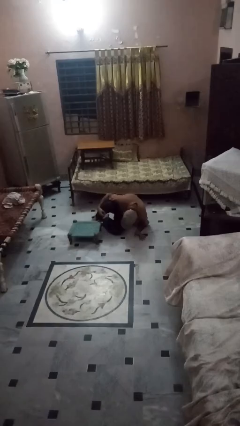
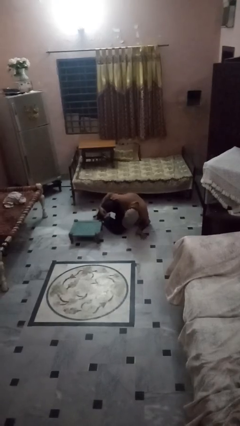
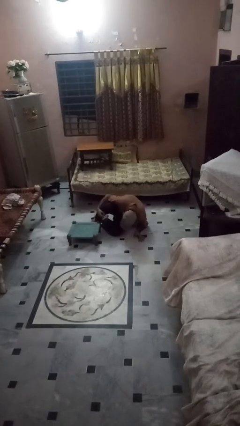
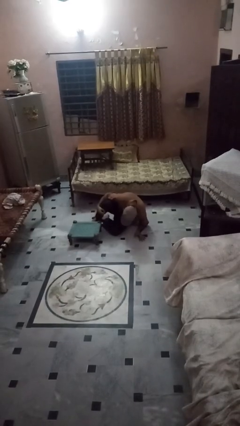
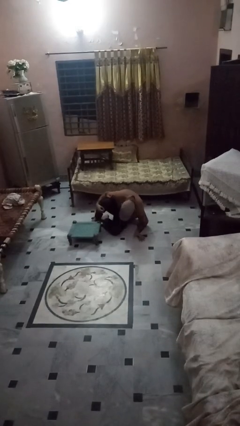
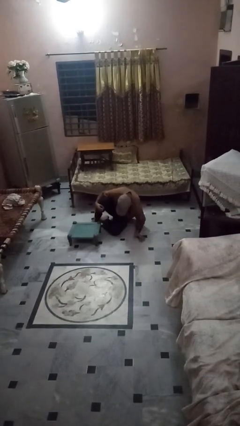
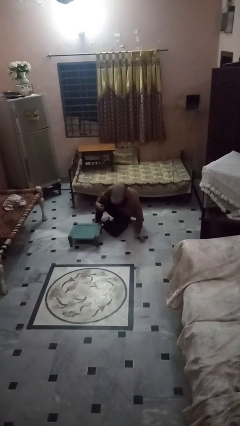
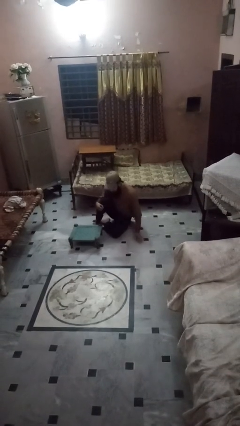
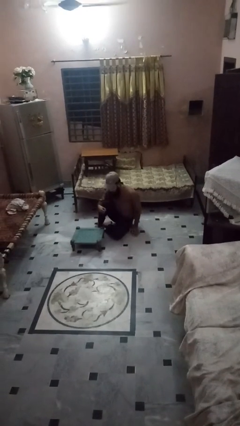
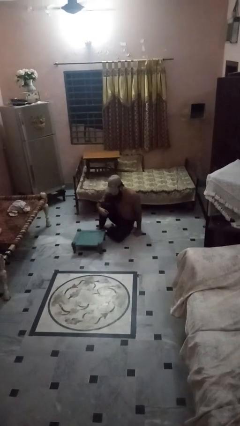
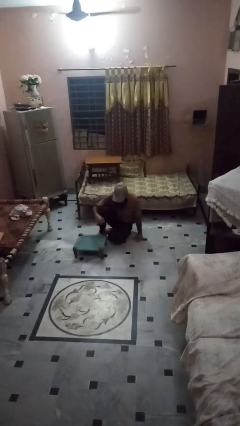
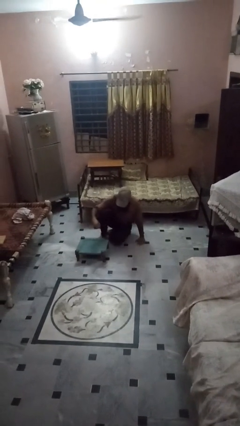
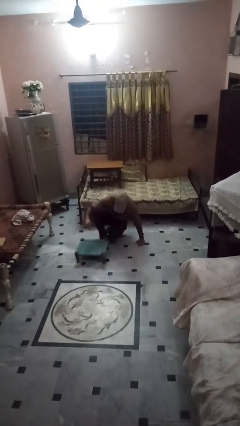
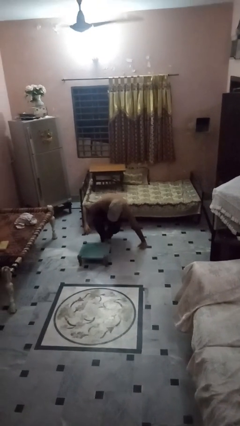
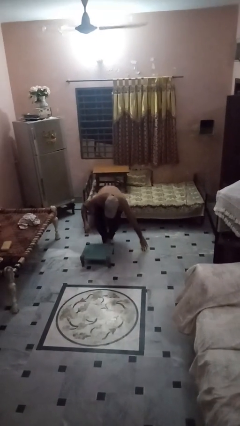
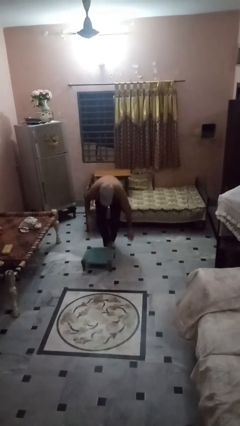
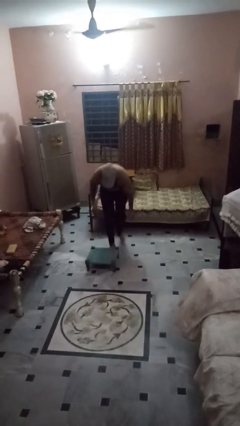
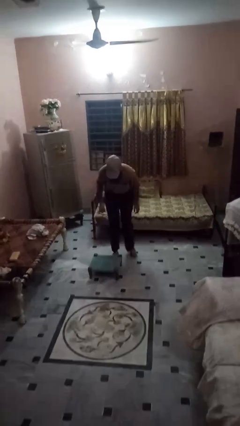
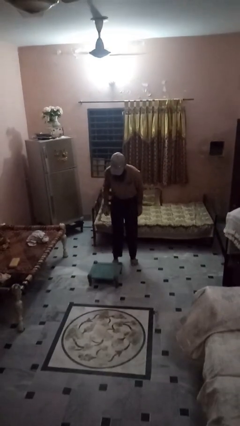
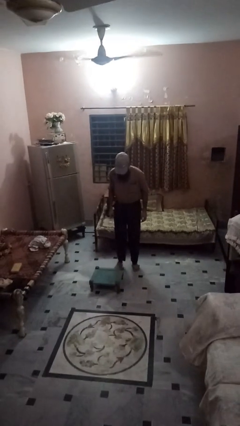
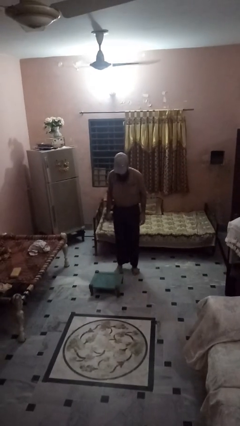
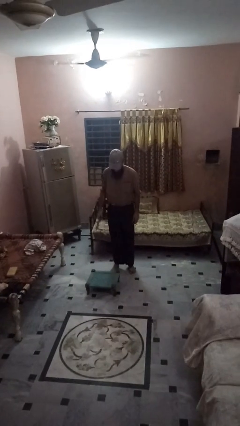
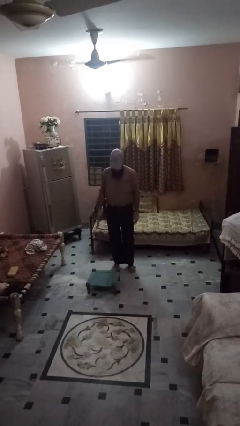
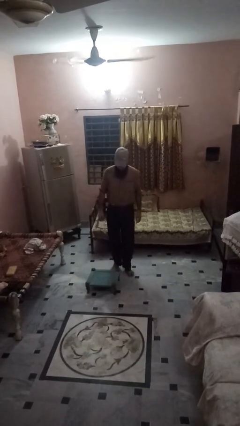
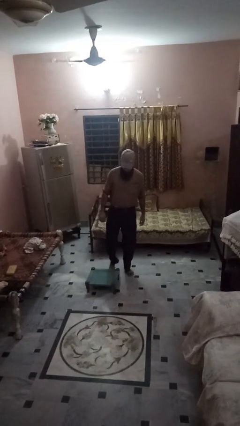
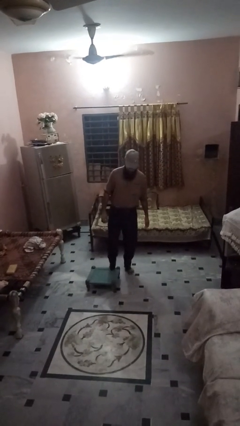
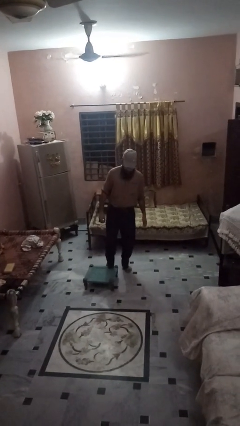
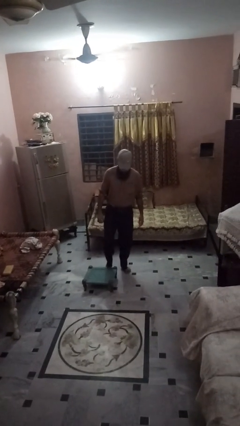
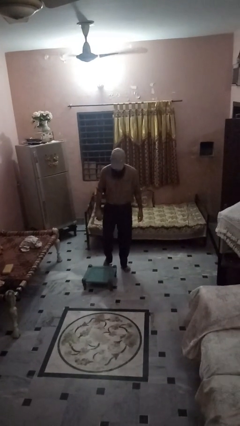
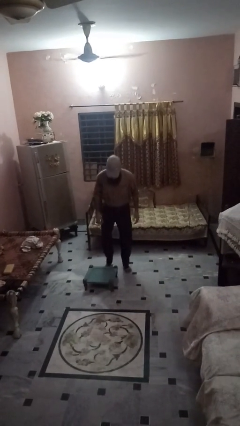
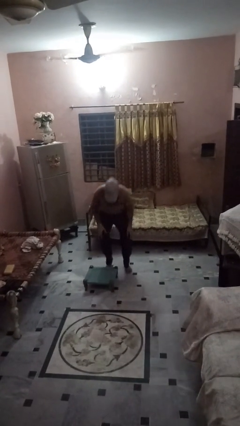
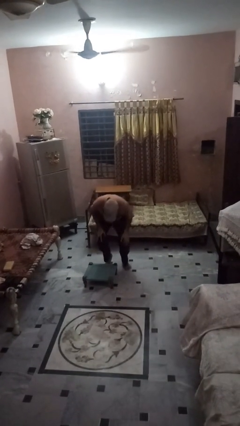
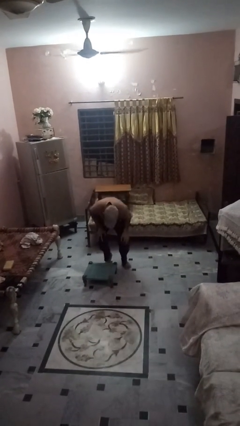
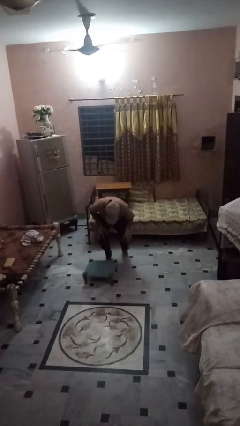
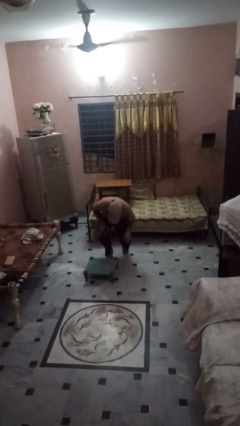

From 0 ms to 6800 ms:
person trips on object on floor

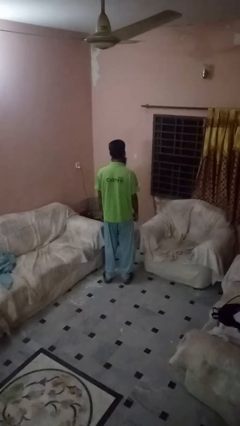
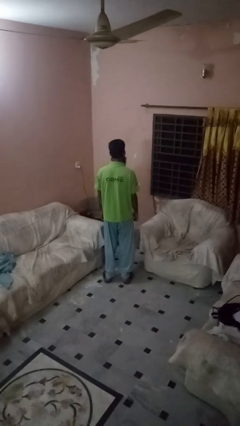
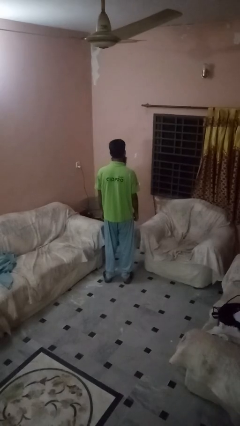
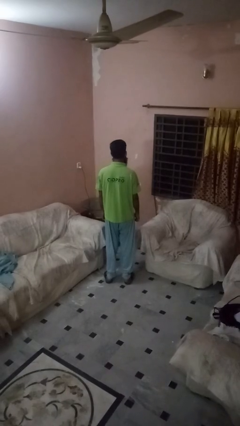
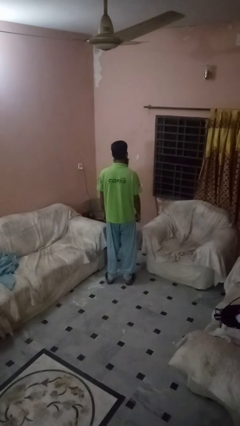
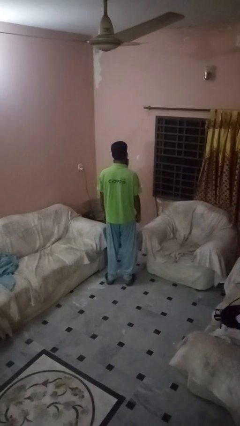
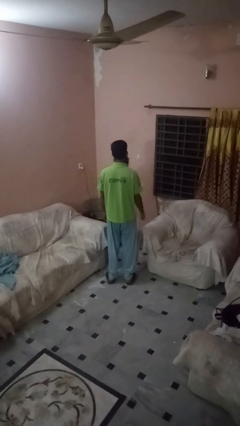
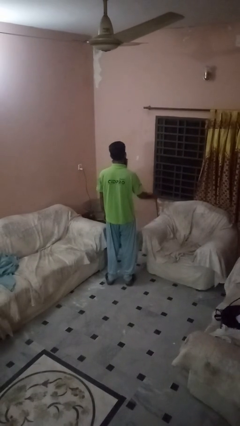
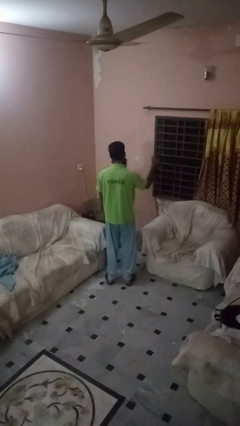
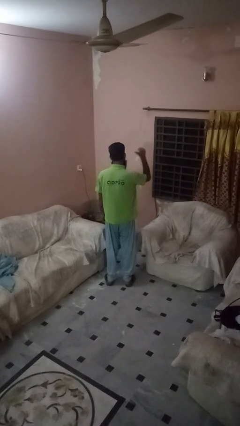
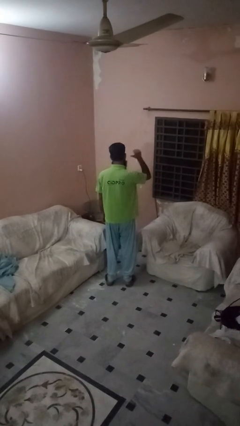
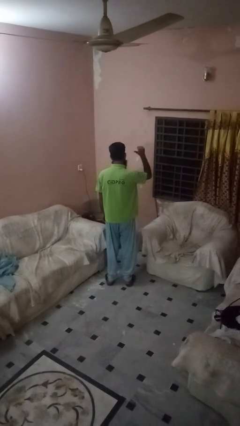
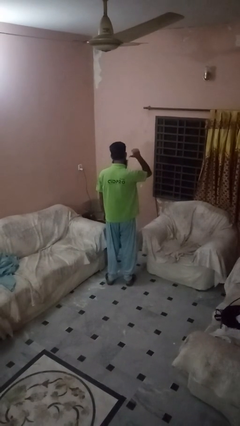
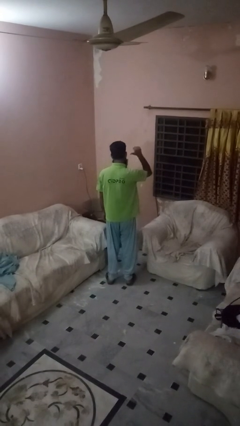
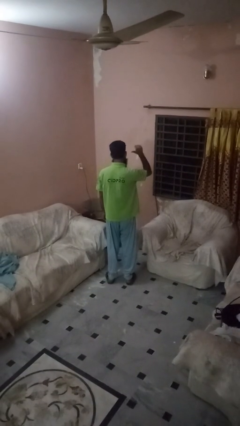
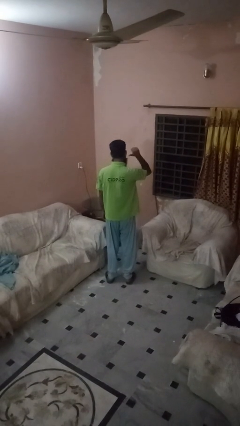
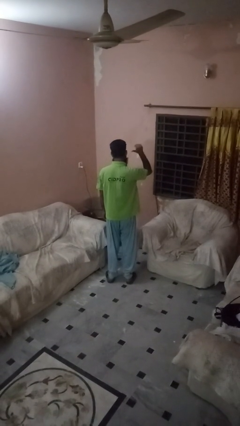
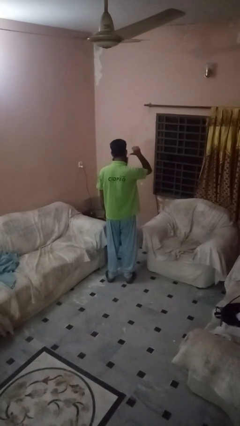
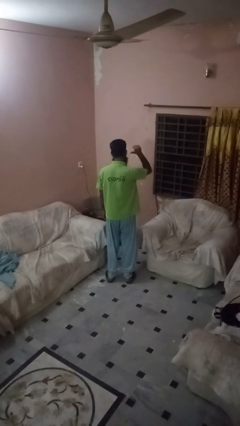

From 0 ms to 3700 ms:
person gestures behind me

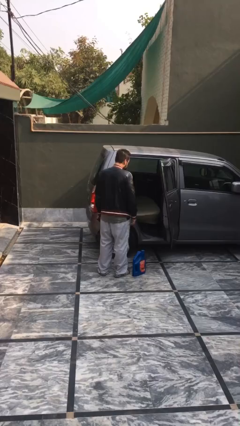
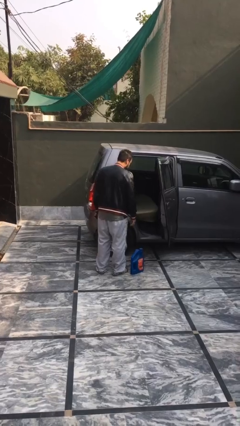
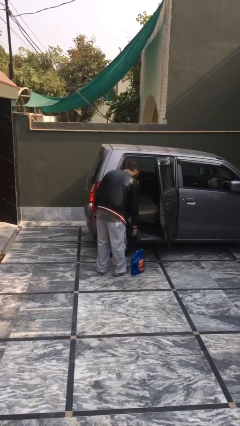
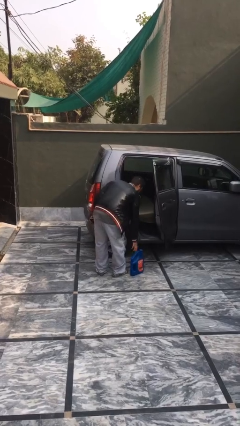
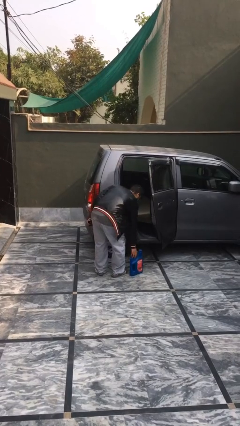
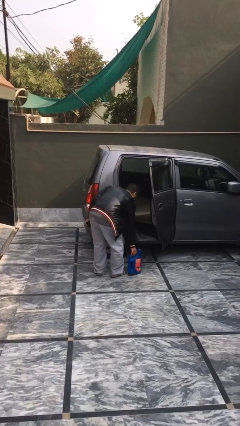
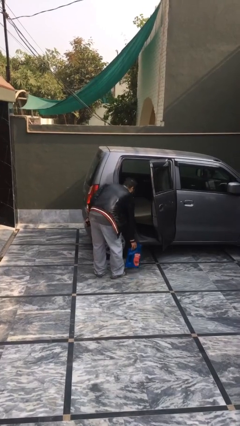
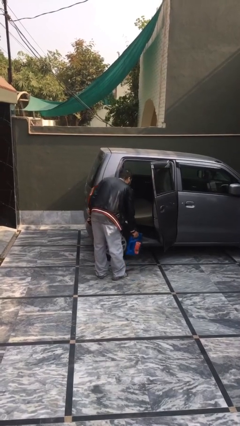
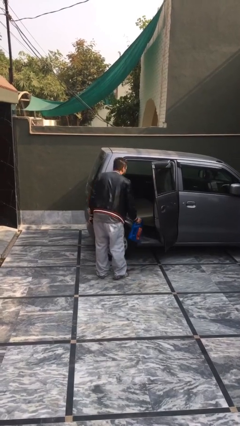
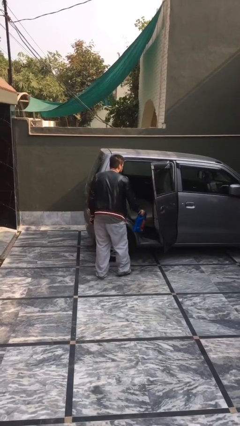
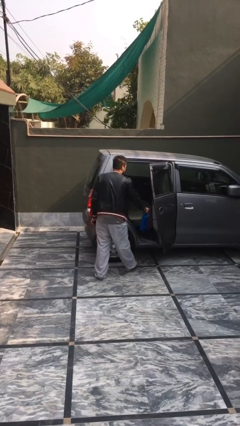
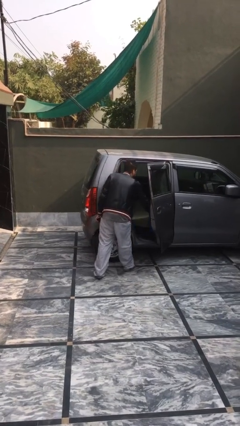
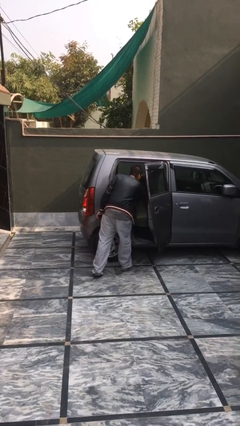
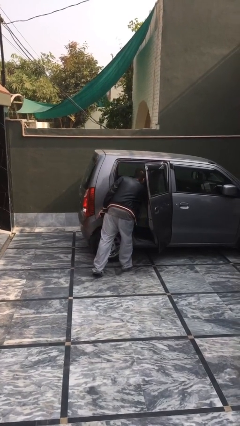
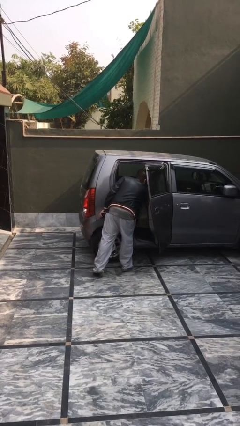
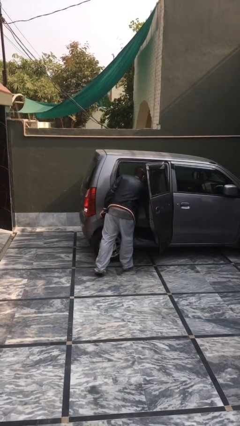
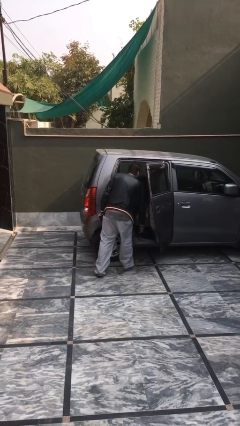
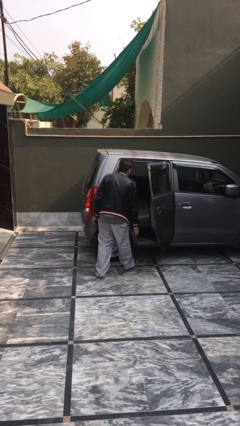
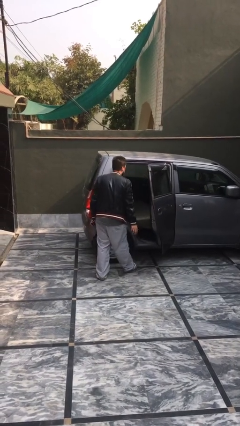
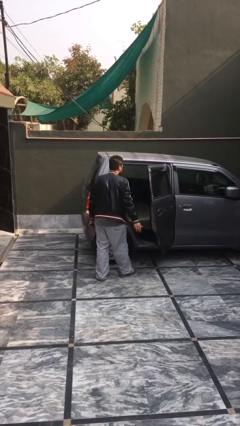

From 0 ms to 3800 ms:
person loads car

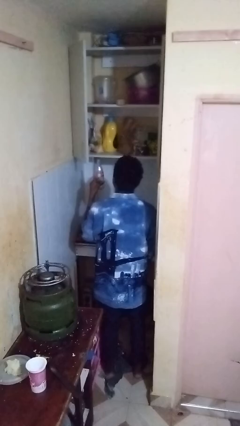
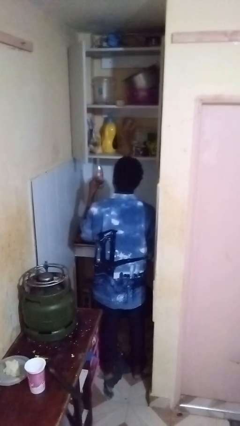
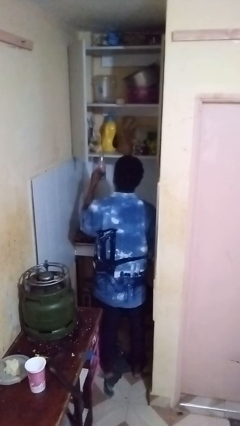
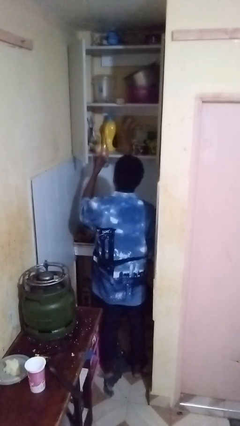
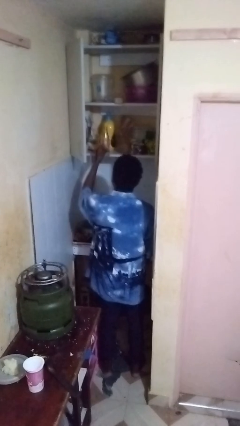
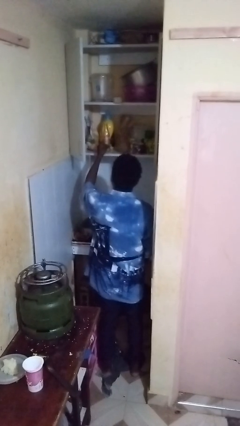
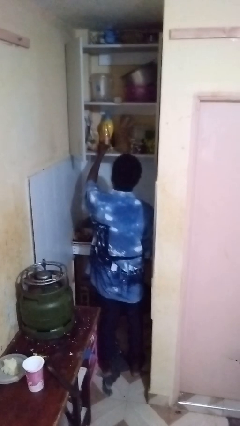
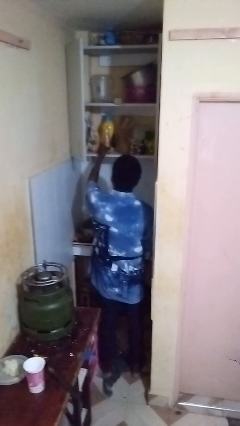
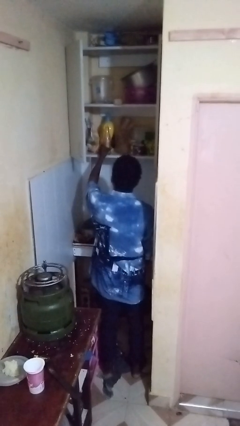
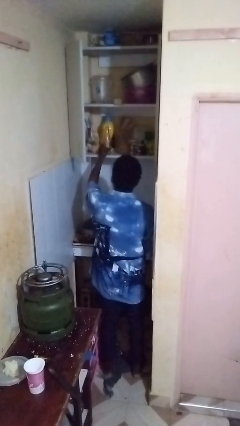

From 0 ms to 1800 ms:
person puts down object into cabinet

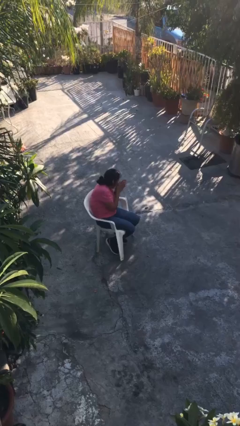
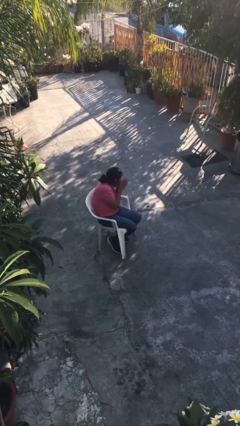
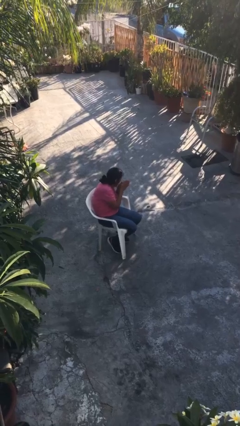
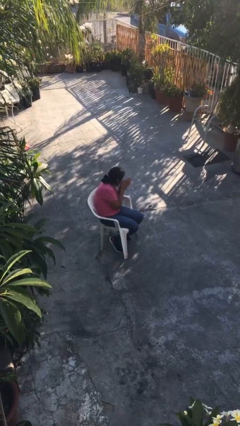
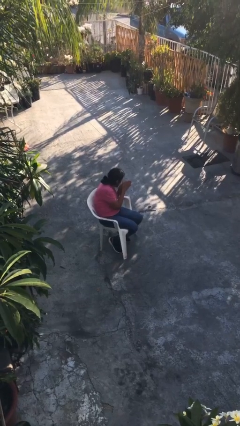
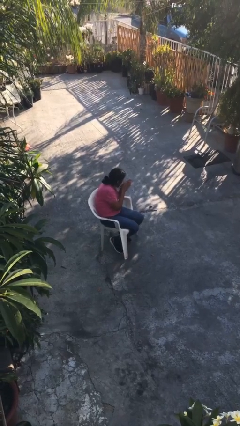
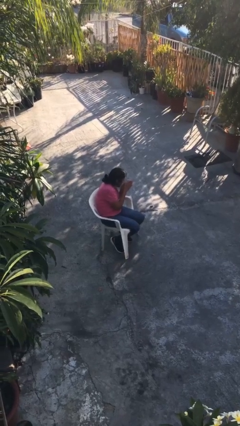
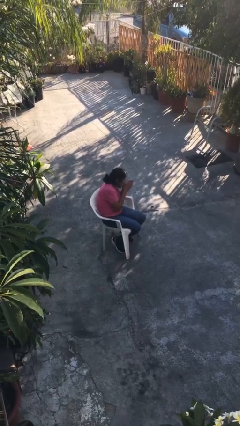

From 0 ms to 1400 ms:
person blows into hands

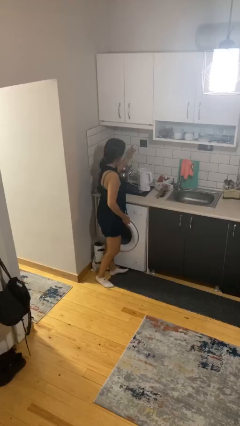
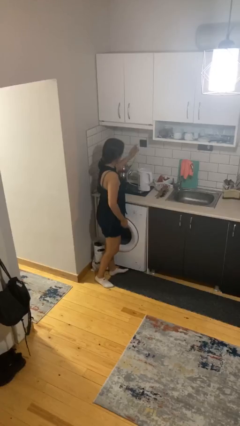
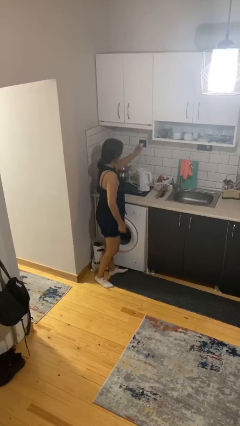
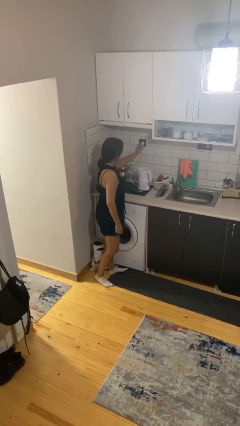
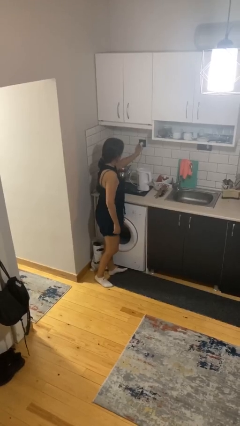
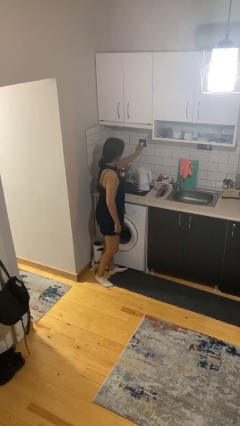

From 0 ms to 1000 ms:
person plugs into electrical socket
